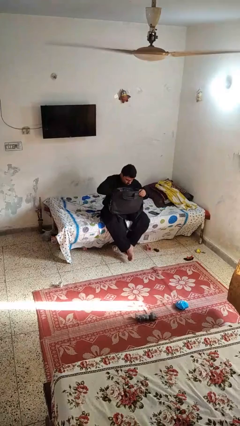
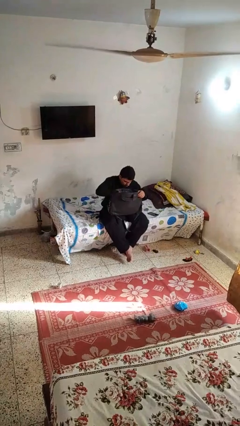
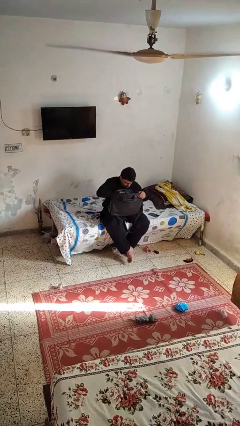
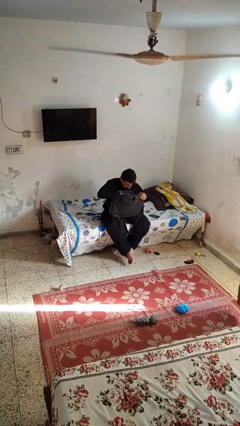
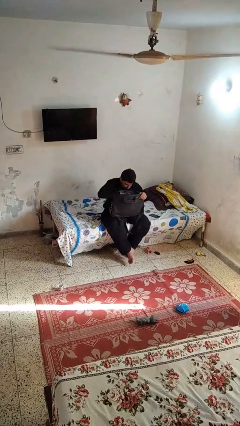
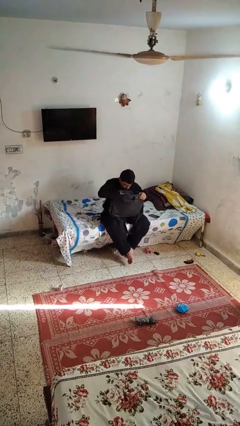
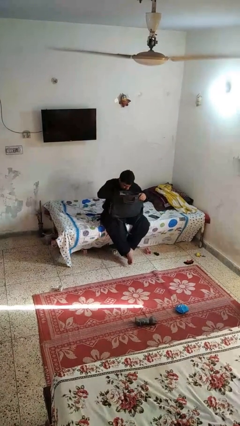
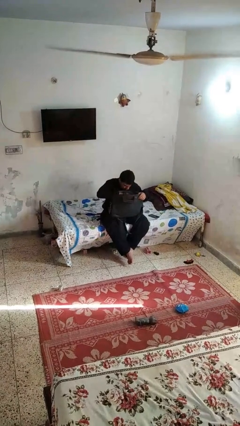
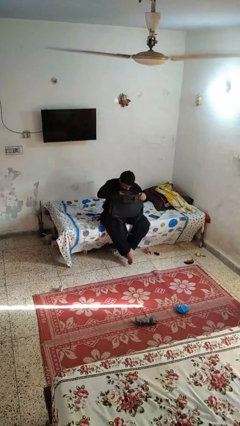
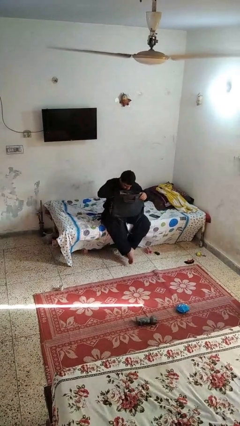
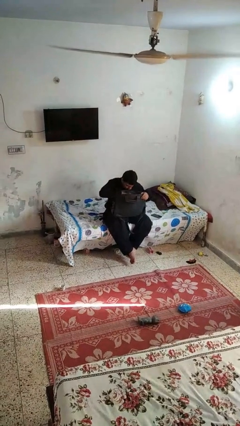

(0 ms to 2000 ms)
person searches in backpack

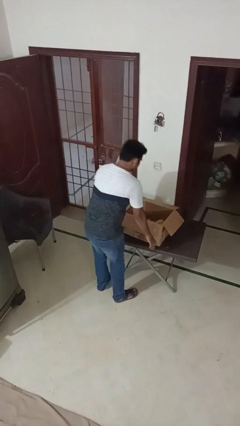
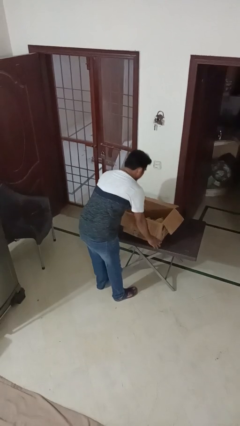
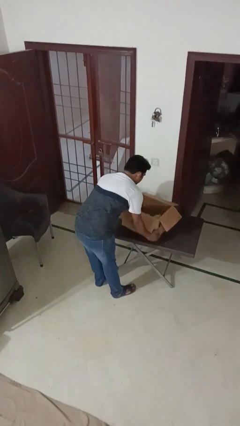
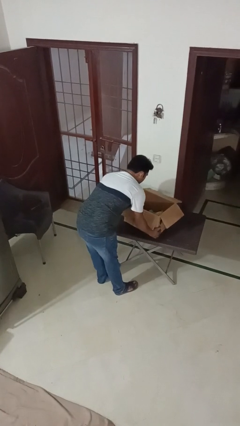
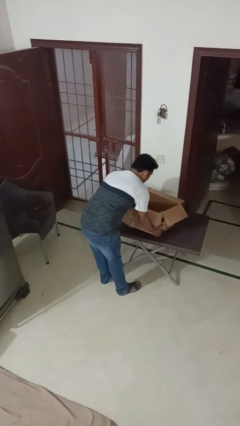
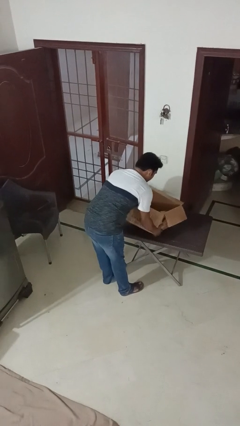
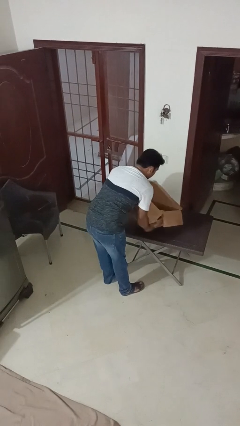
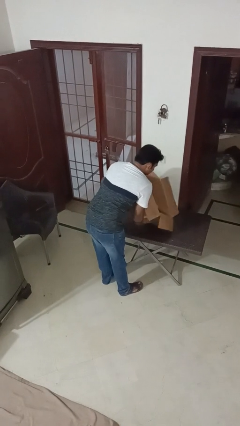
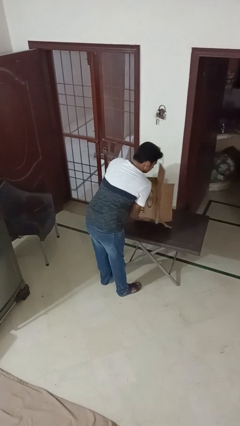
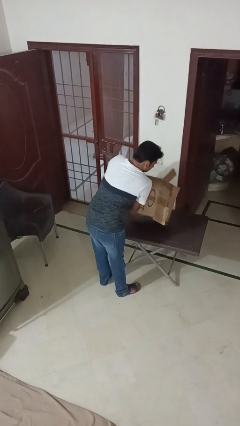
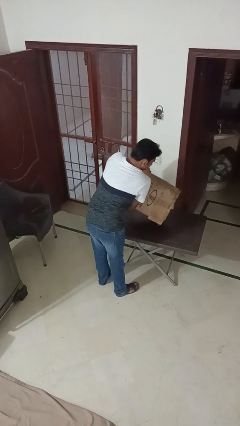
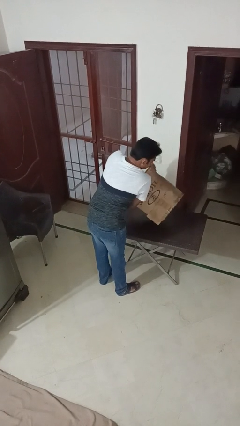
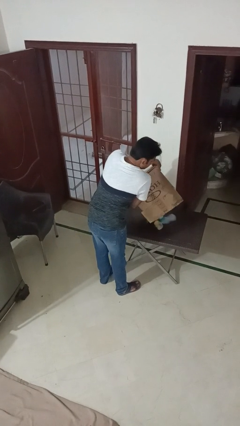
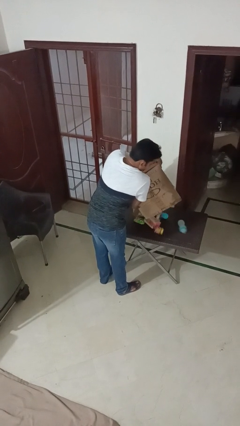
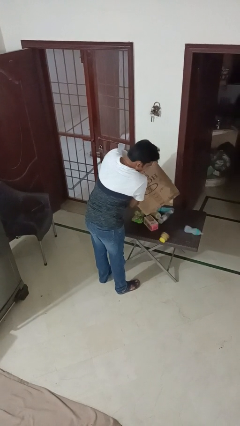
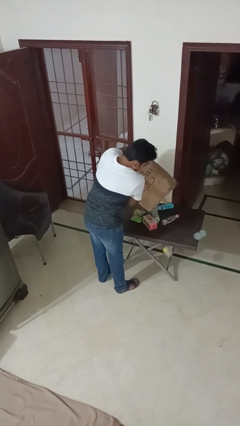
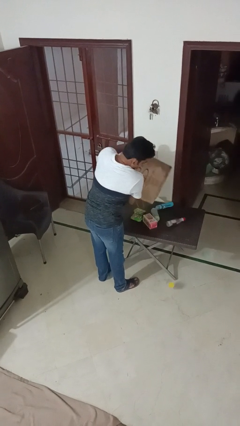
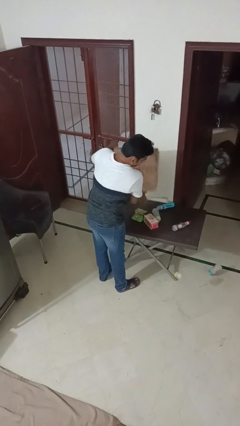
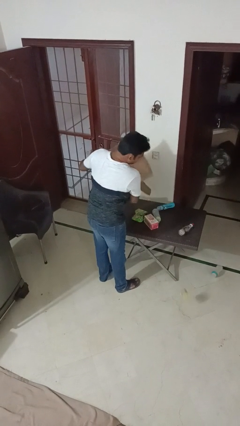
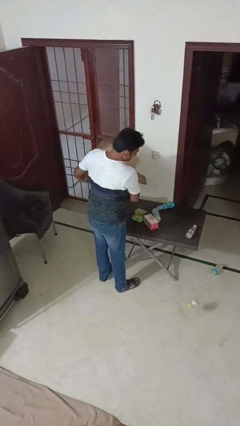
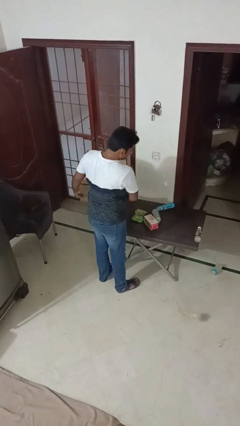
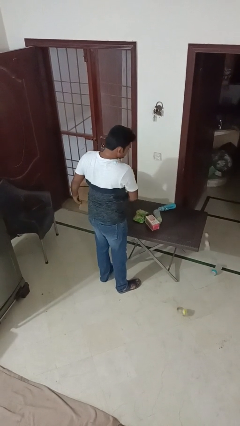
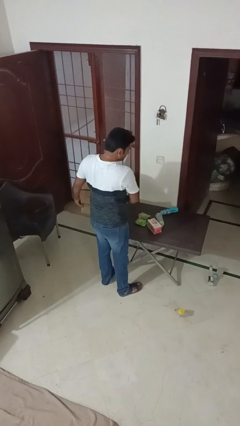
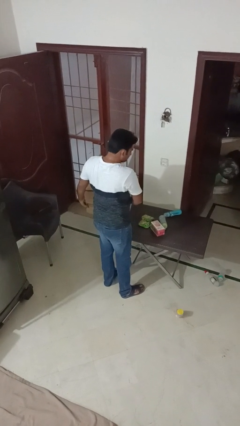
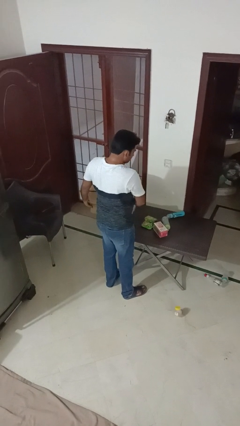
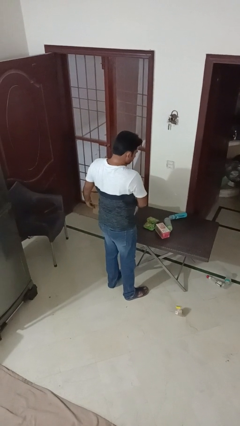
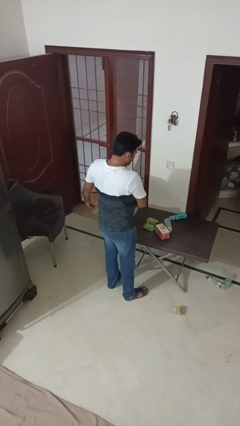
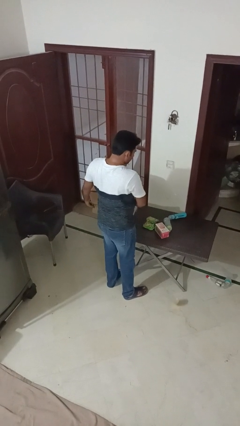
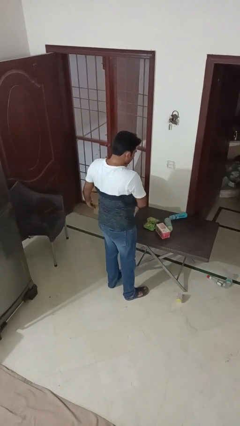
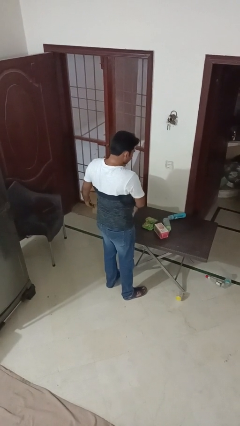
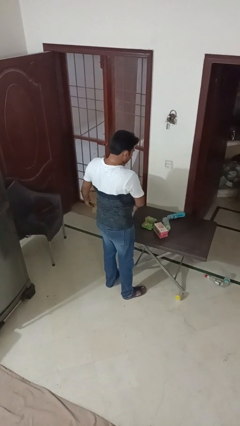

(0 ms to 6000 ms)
person unloads box onto table

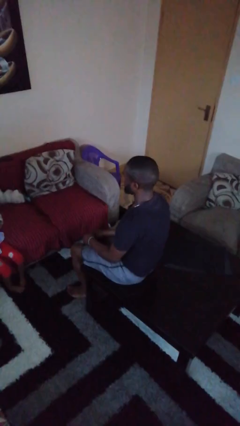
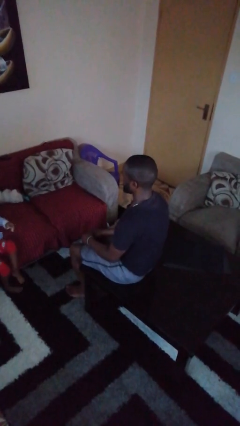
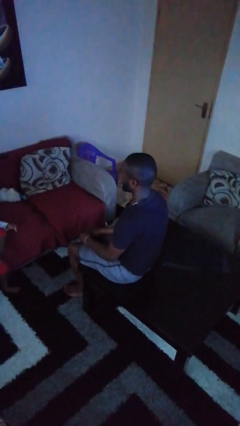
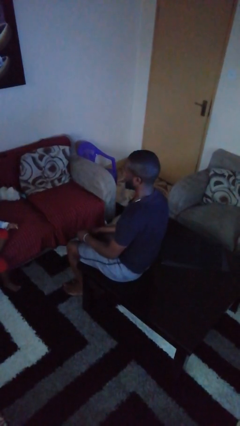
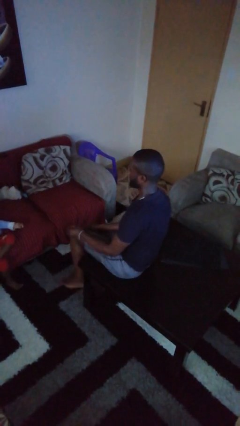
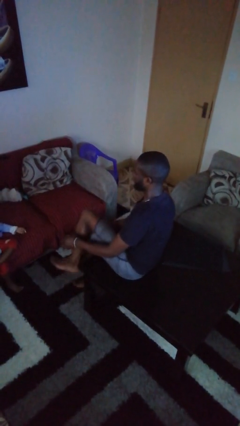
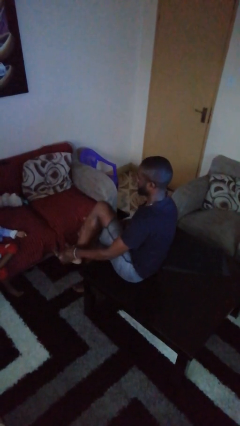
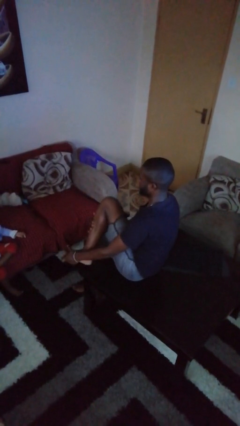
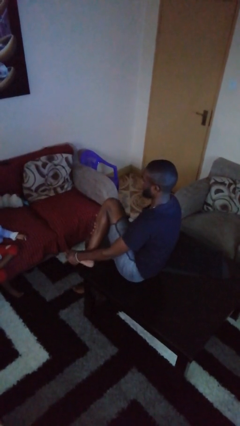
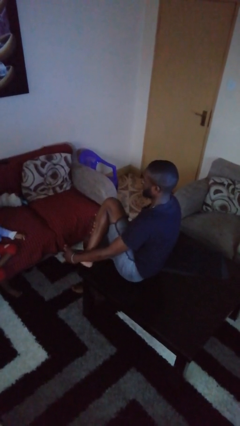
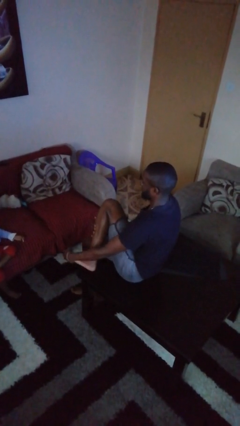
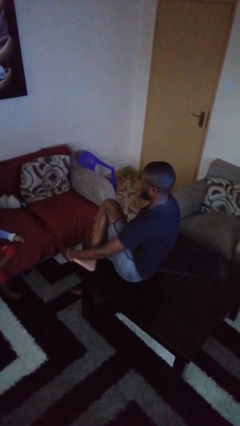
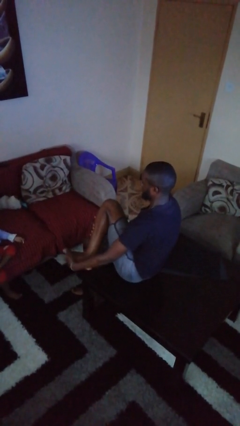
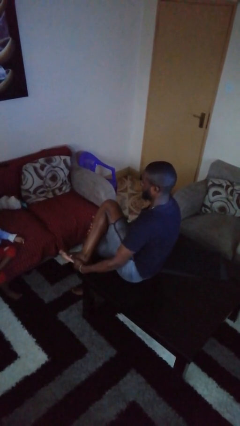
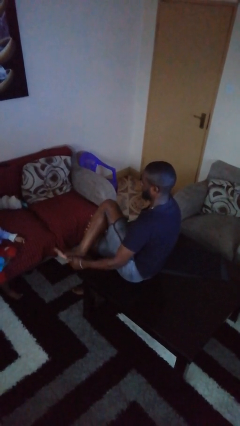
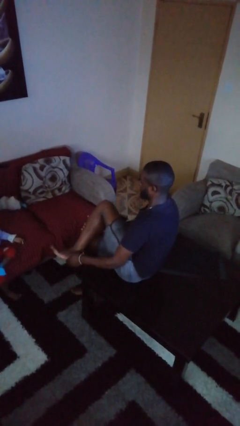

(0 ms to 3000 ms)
person rubs foot

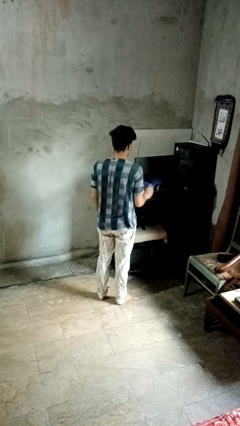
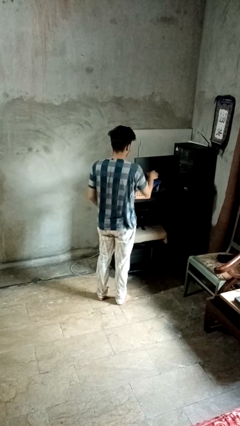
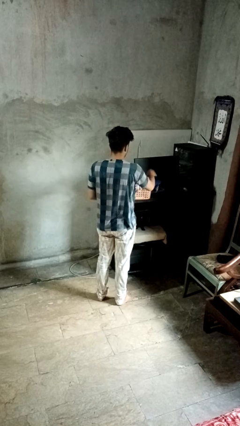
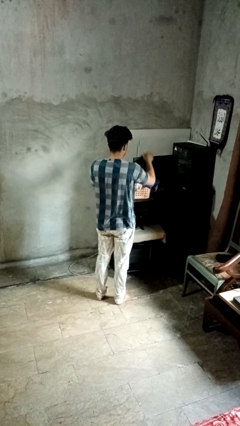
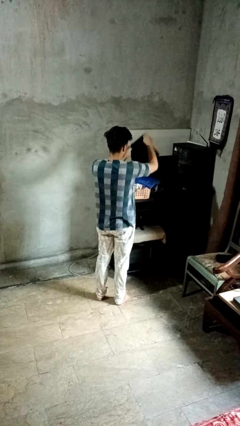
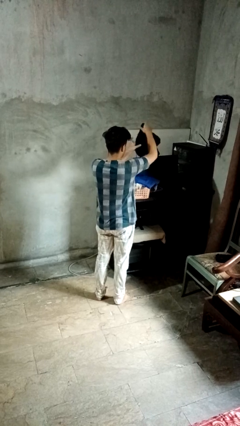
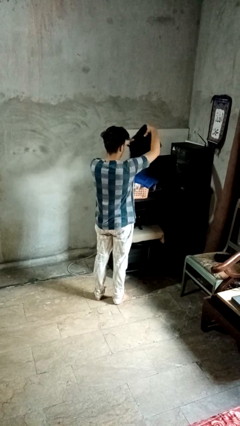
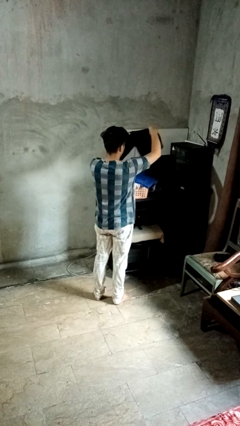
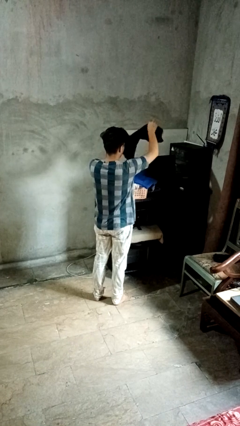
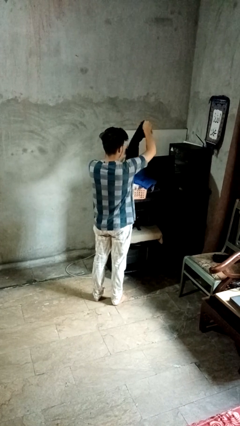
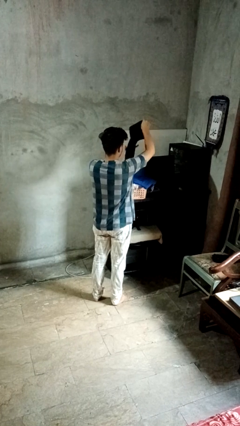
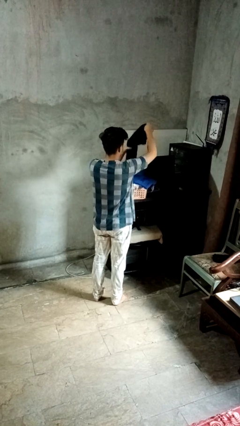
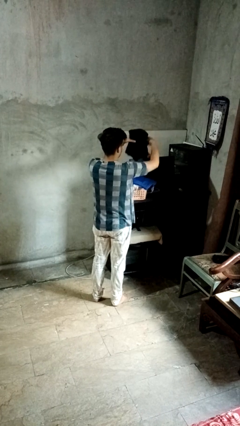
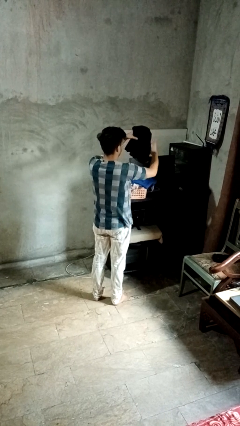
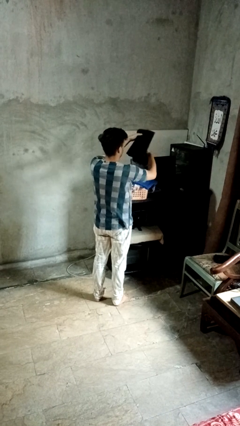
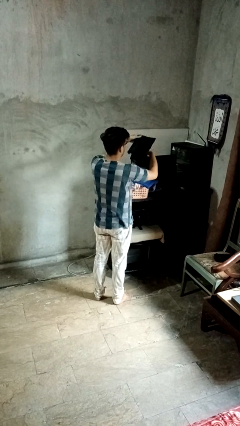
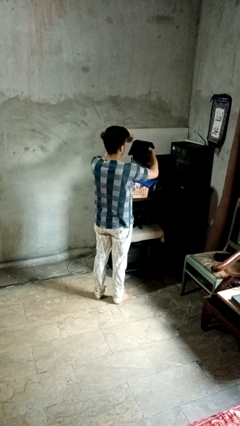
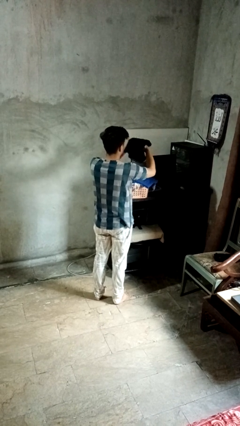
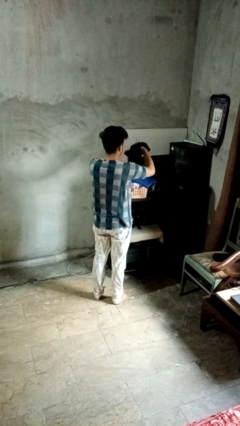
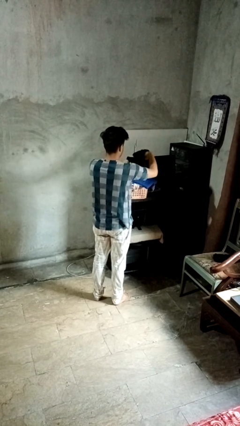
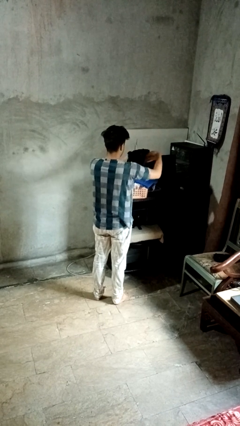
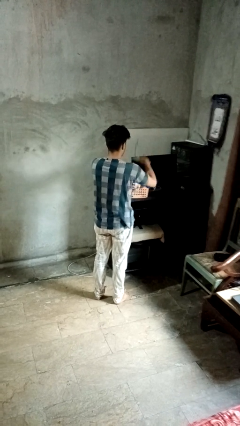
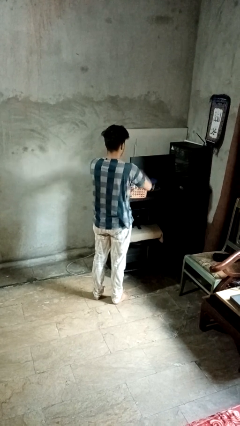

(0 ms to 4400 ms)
person folds shirt

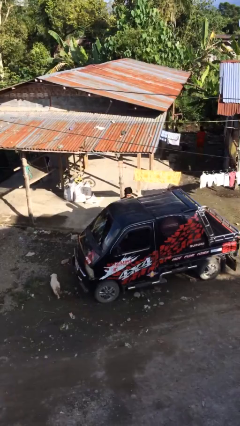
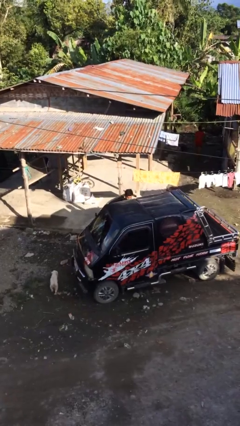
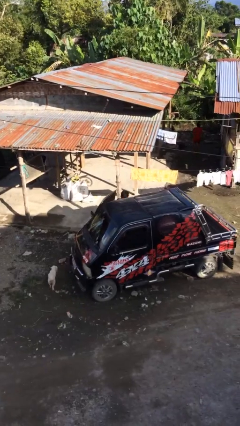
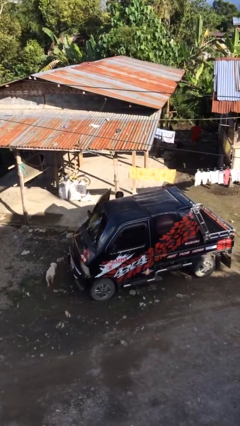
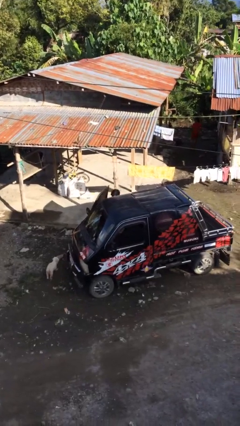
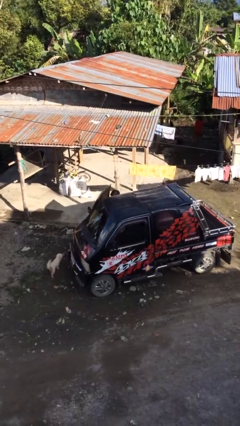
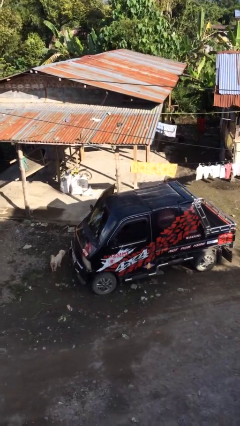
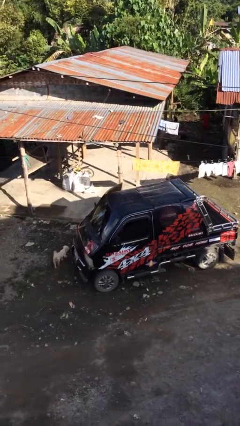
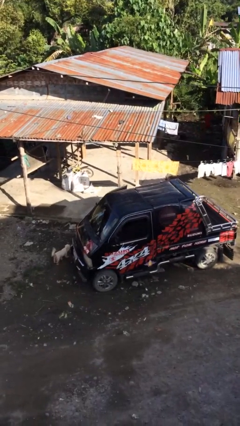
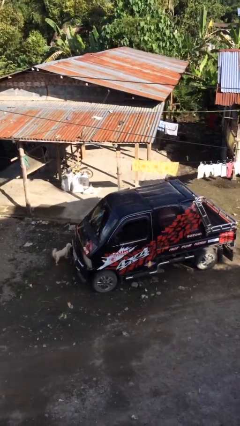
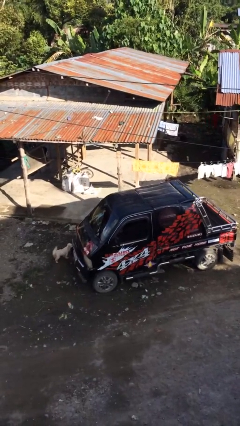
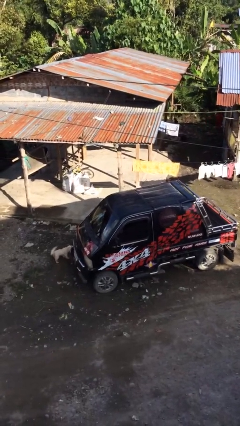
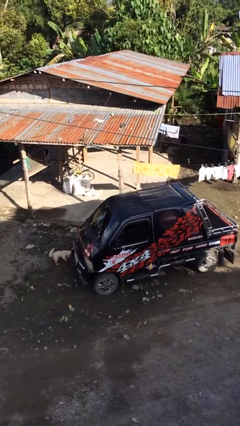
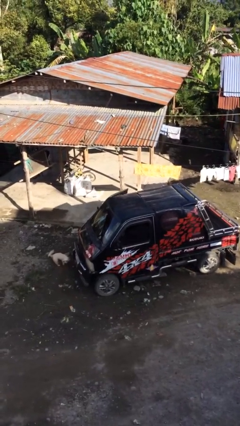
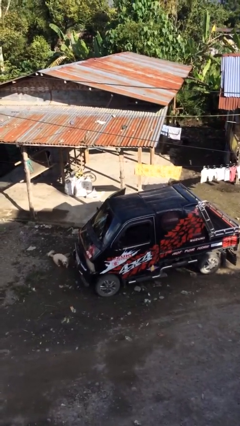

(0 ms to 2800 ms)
person enters car
